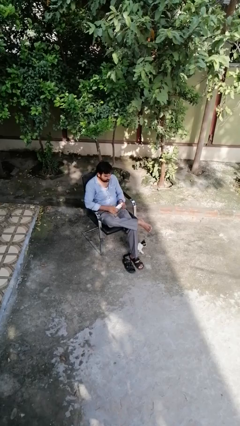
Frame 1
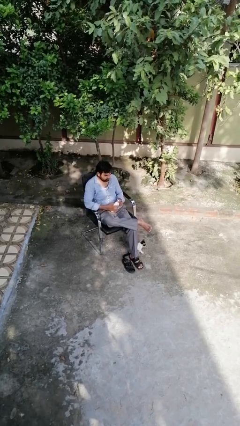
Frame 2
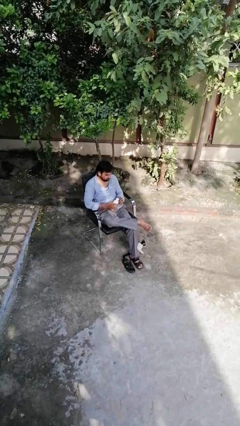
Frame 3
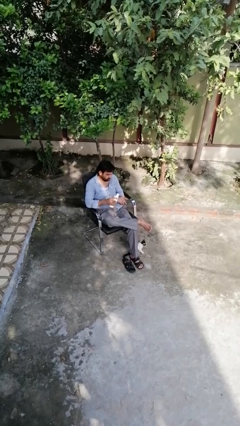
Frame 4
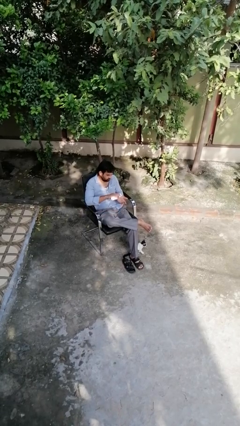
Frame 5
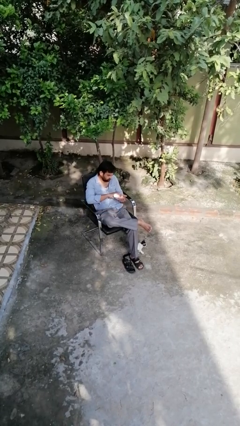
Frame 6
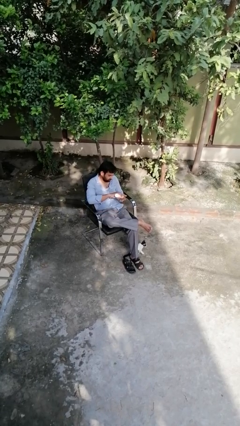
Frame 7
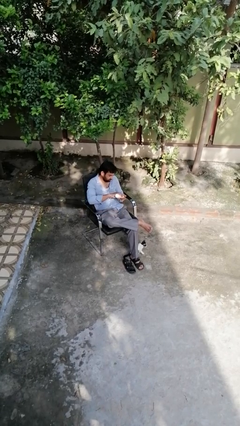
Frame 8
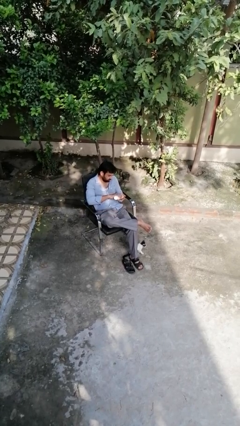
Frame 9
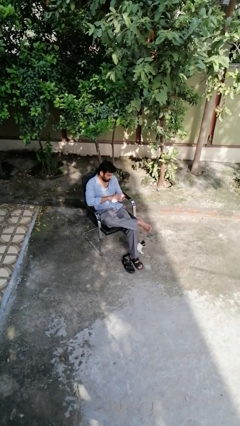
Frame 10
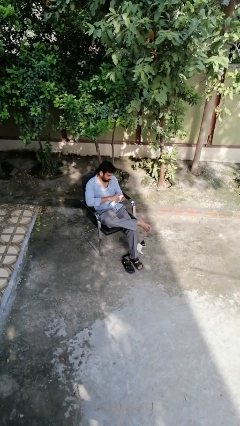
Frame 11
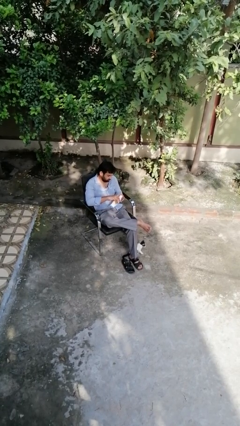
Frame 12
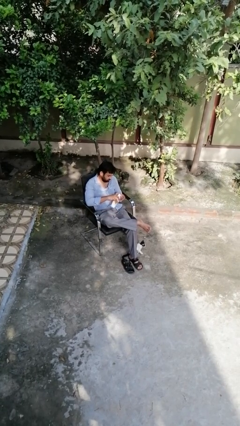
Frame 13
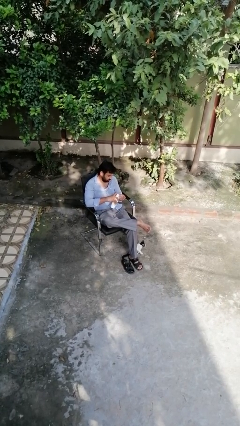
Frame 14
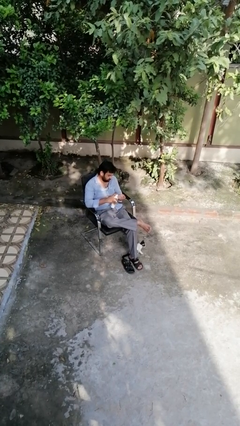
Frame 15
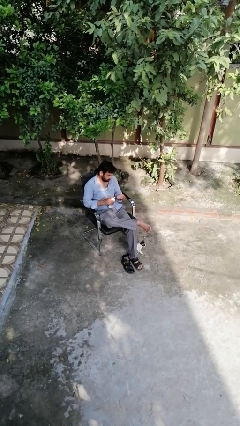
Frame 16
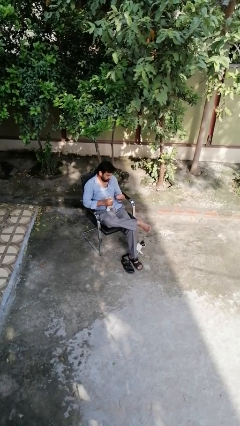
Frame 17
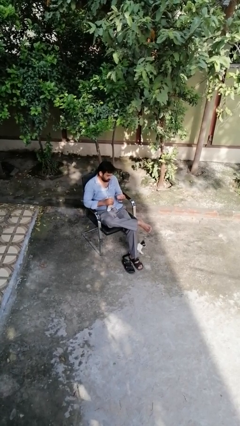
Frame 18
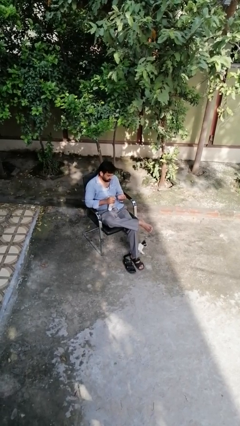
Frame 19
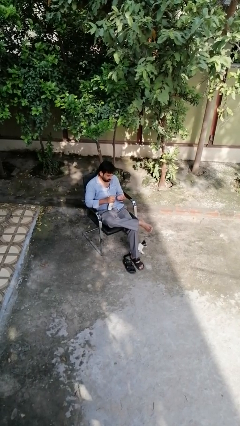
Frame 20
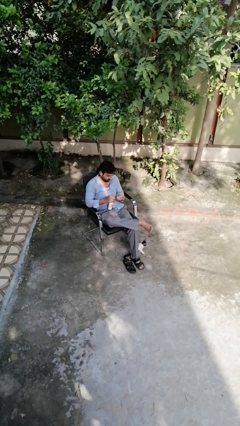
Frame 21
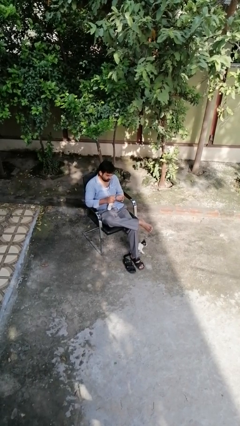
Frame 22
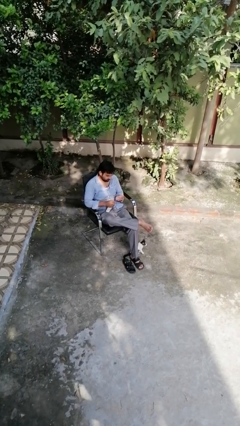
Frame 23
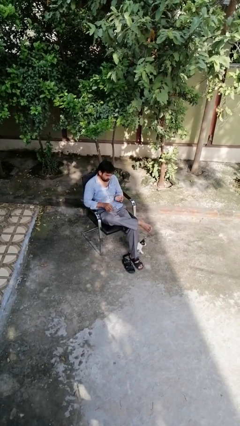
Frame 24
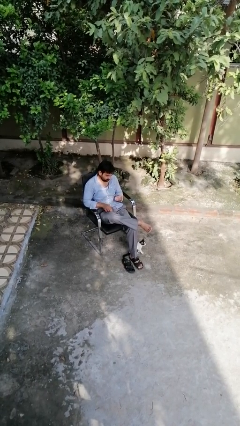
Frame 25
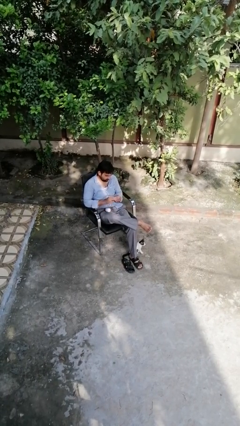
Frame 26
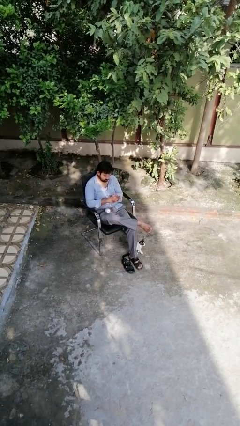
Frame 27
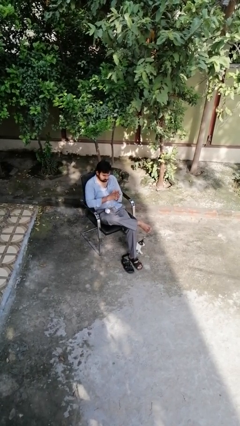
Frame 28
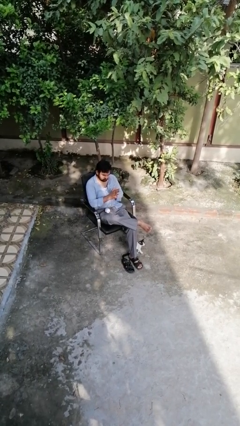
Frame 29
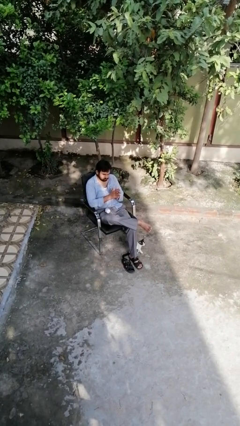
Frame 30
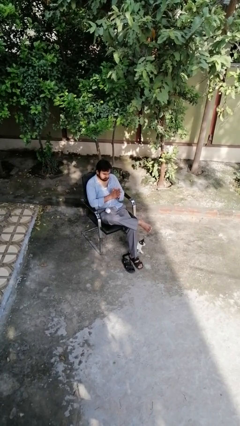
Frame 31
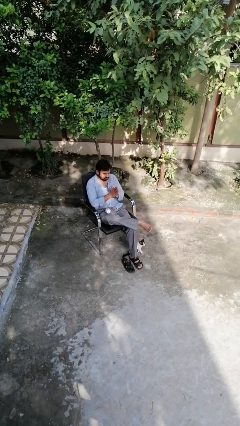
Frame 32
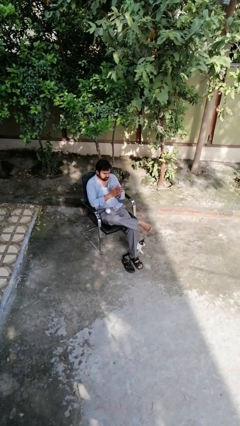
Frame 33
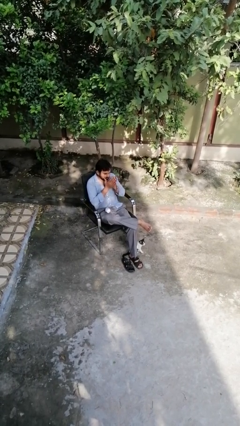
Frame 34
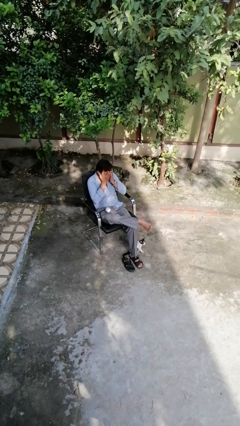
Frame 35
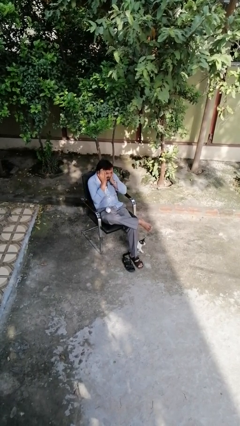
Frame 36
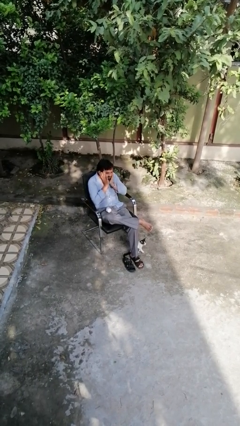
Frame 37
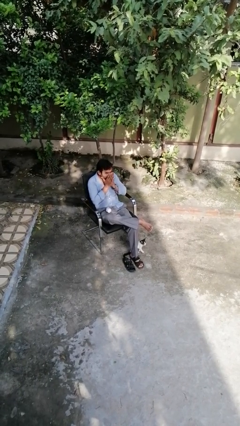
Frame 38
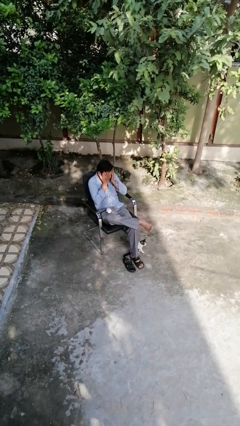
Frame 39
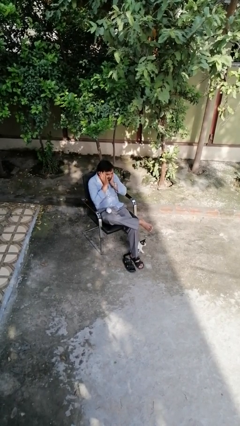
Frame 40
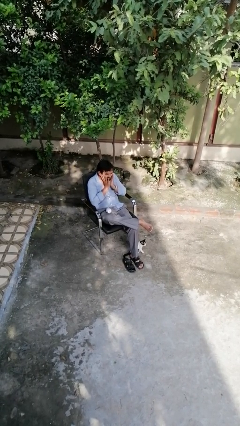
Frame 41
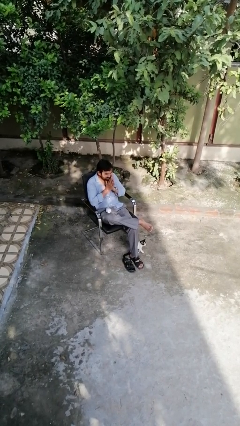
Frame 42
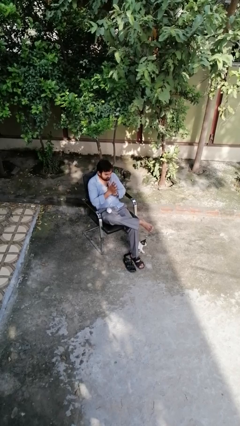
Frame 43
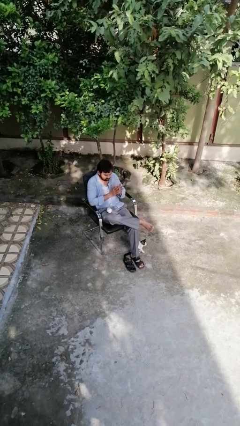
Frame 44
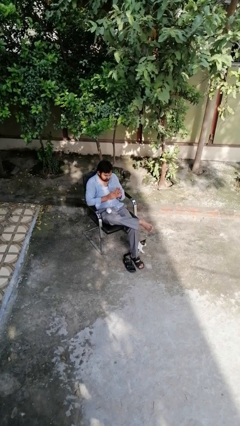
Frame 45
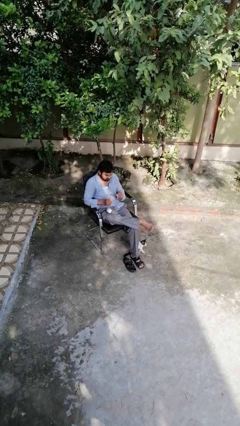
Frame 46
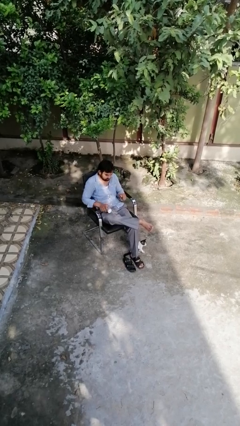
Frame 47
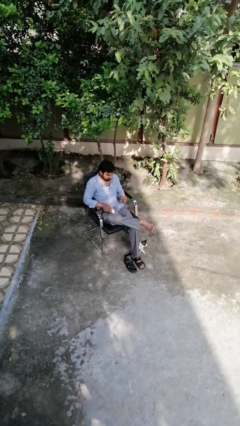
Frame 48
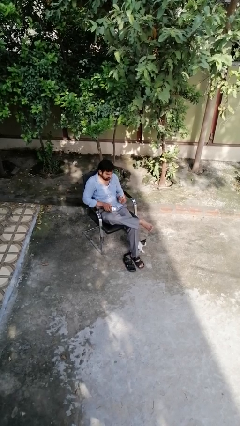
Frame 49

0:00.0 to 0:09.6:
person applies facial moisturizer

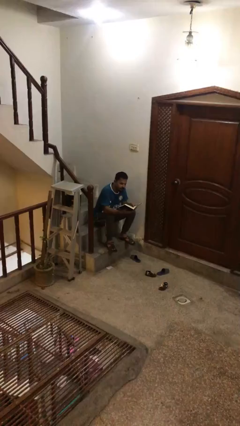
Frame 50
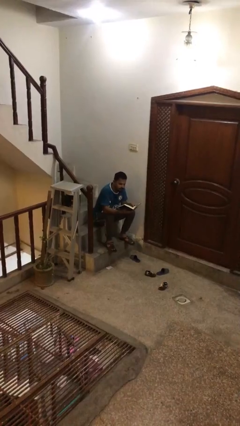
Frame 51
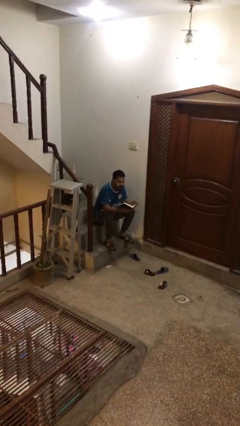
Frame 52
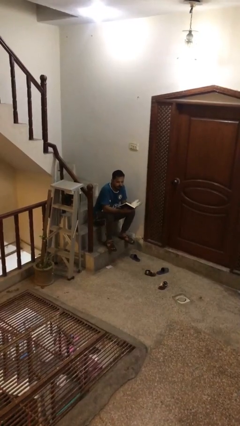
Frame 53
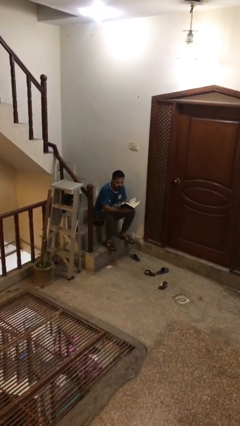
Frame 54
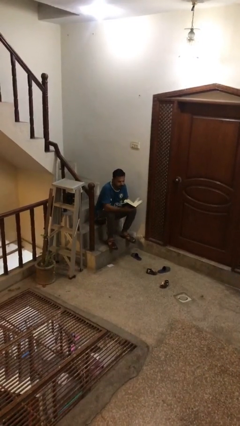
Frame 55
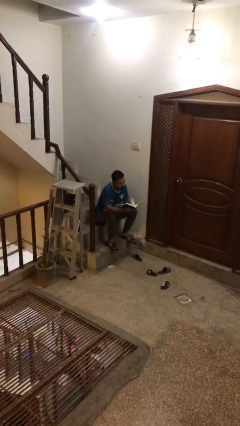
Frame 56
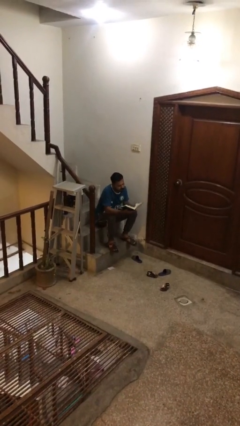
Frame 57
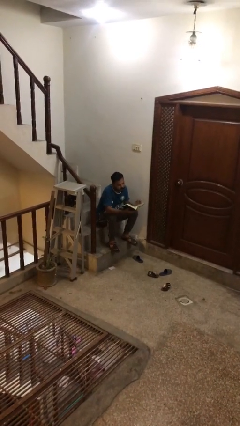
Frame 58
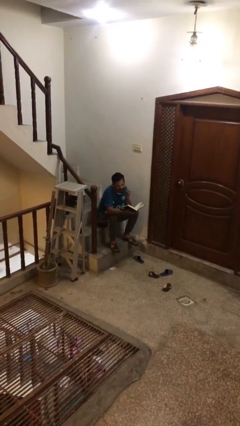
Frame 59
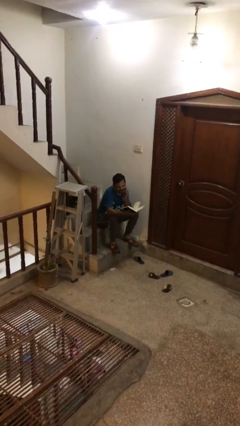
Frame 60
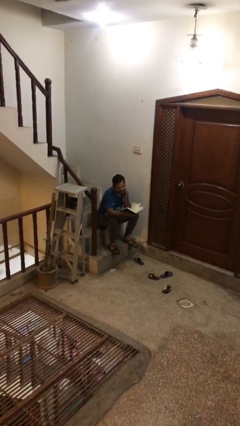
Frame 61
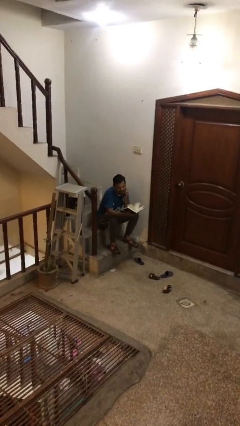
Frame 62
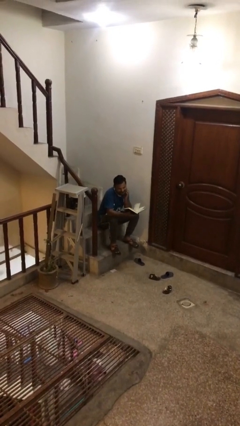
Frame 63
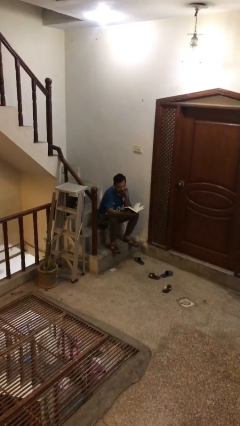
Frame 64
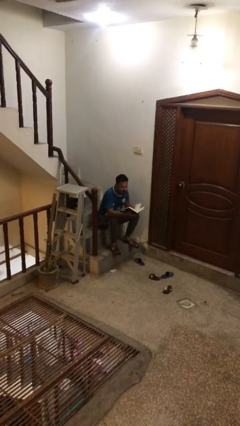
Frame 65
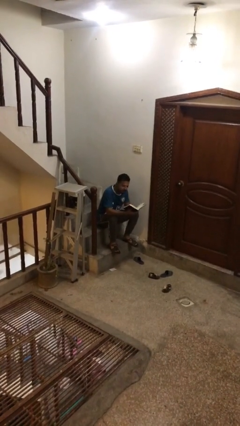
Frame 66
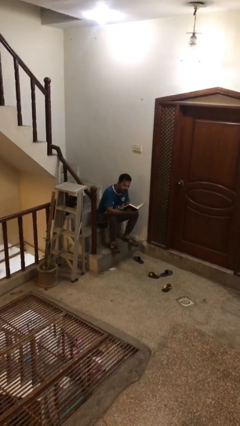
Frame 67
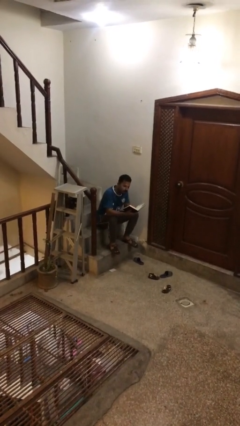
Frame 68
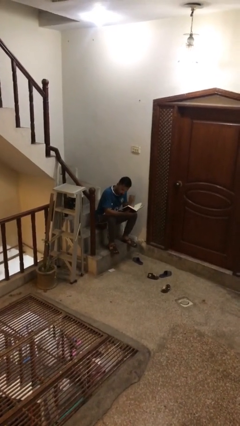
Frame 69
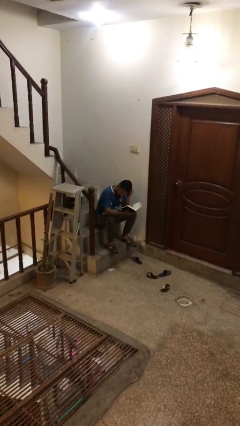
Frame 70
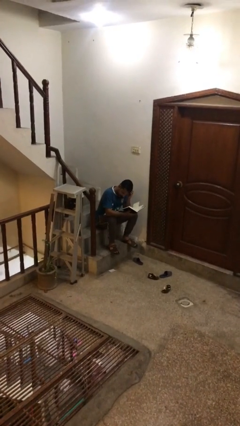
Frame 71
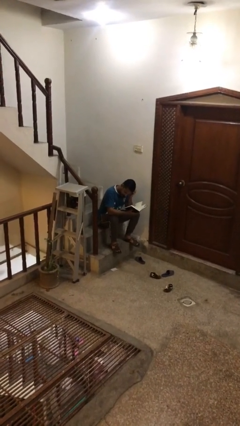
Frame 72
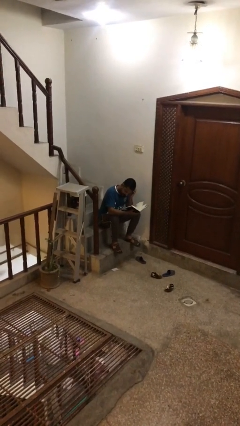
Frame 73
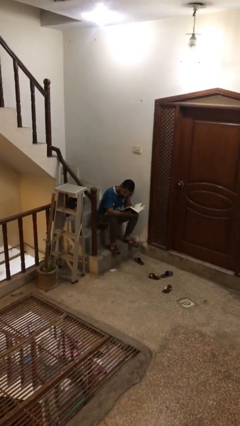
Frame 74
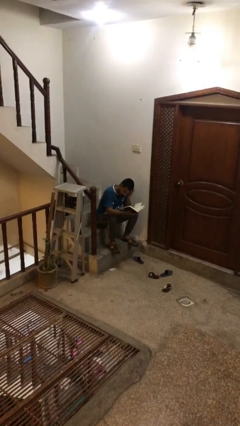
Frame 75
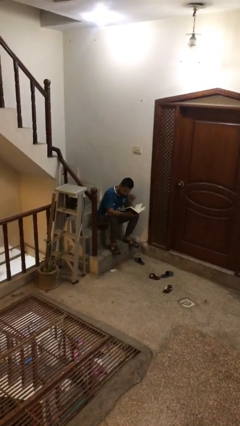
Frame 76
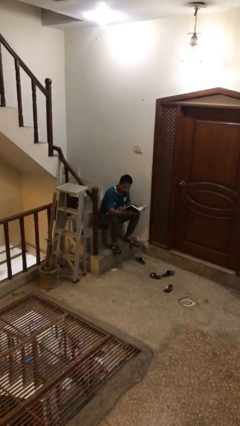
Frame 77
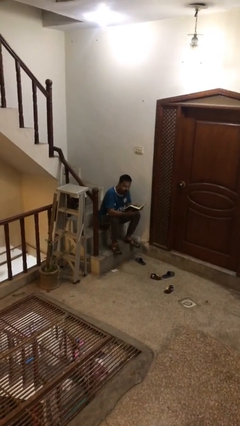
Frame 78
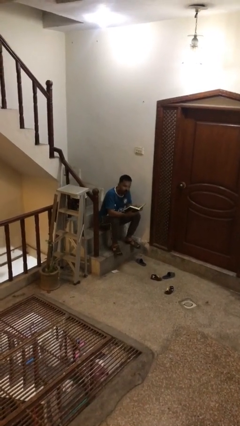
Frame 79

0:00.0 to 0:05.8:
person reads document

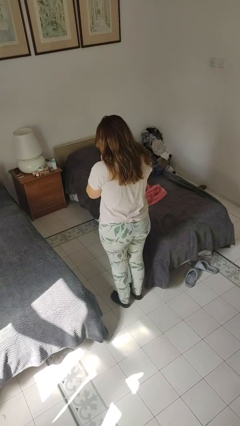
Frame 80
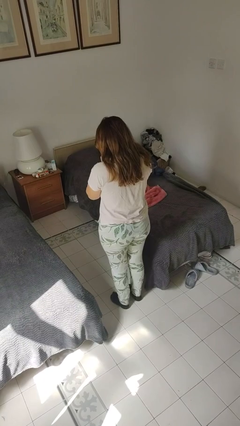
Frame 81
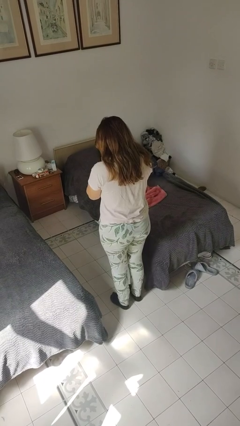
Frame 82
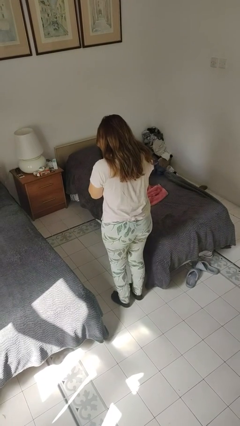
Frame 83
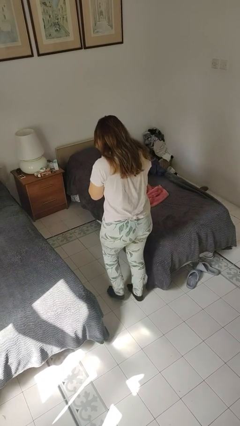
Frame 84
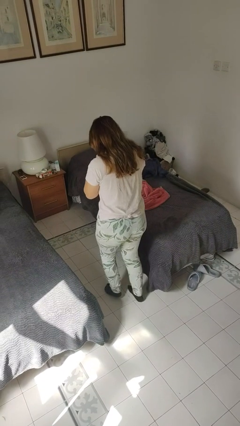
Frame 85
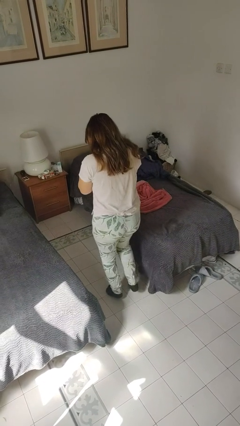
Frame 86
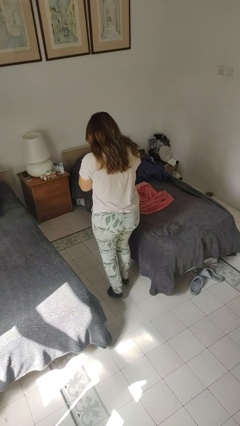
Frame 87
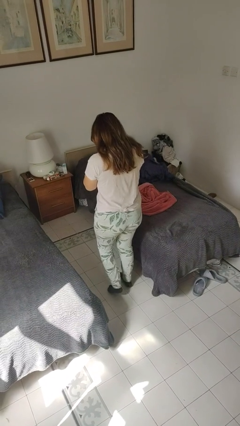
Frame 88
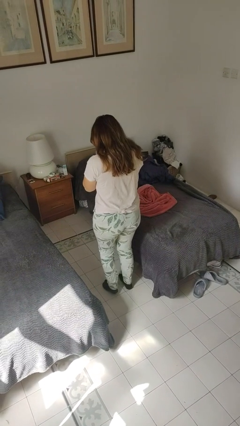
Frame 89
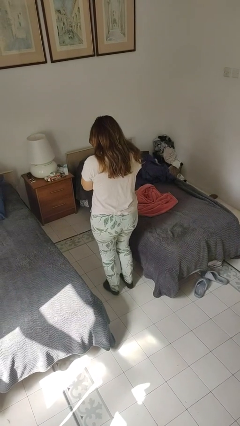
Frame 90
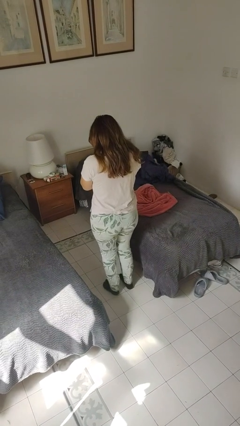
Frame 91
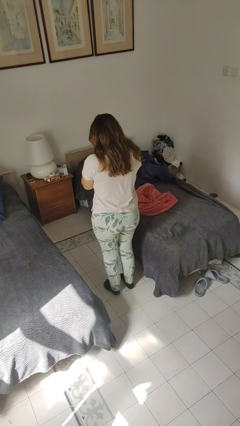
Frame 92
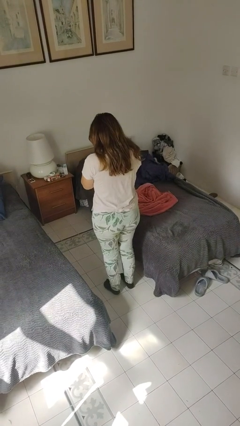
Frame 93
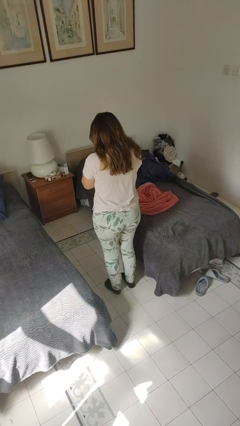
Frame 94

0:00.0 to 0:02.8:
person walks tiptoe
